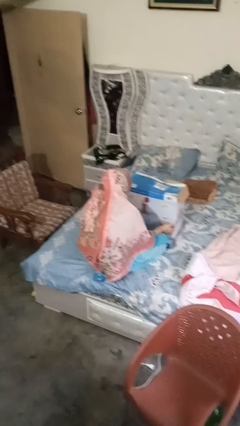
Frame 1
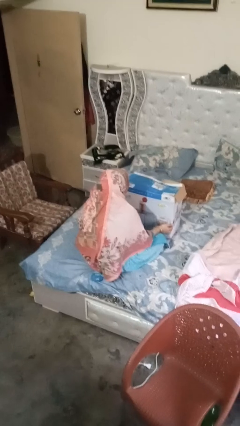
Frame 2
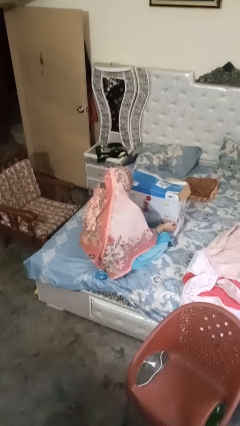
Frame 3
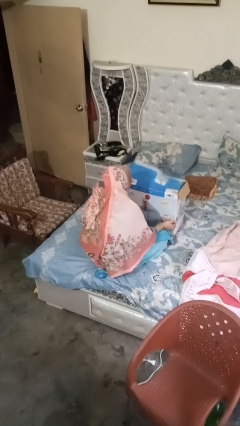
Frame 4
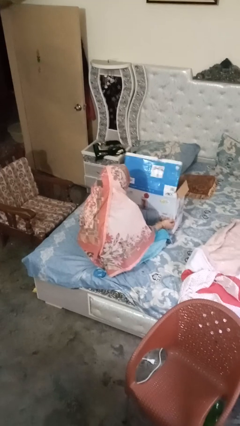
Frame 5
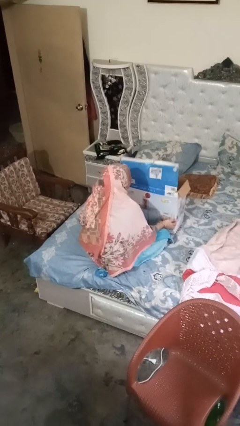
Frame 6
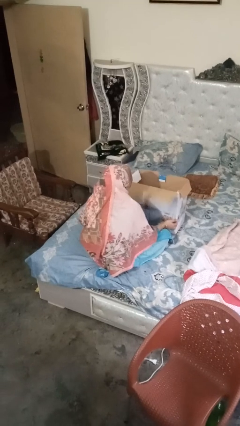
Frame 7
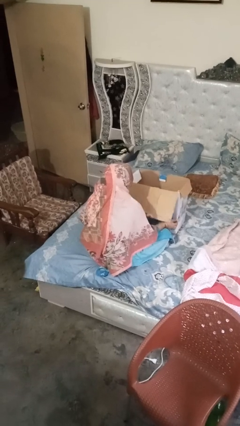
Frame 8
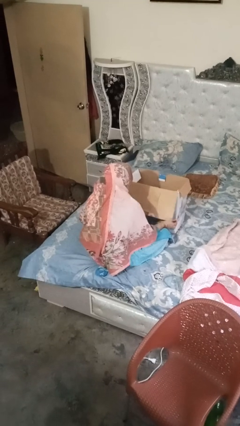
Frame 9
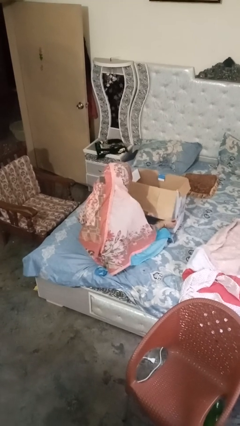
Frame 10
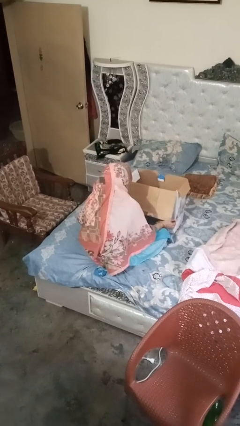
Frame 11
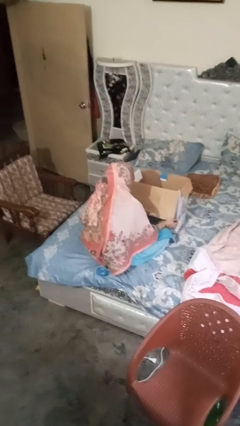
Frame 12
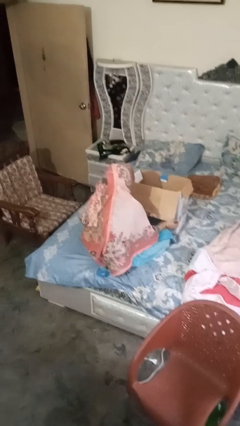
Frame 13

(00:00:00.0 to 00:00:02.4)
person opens box

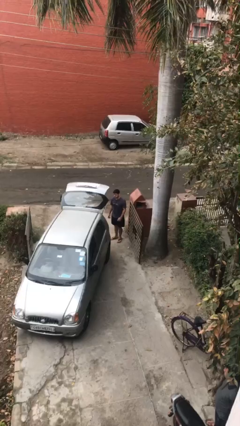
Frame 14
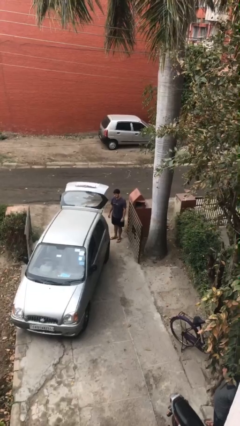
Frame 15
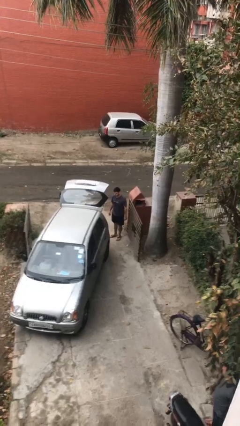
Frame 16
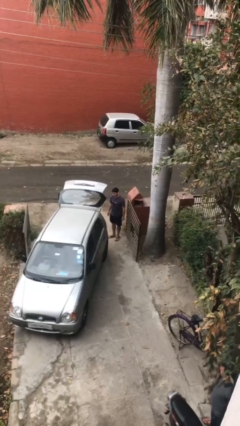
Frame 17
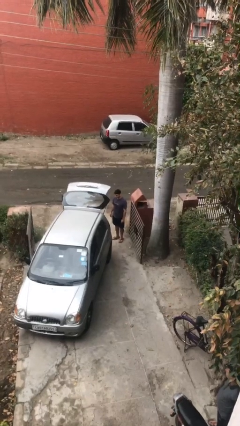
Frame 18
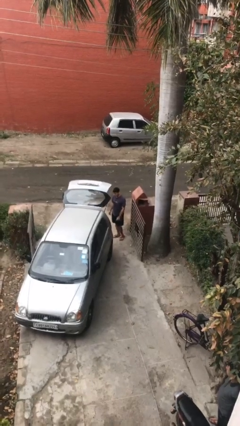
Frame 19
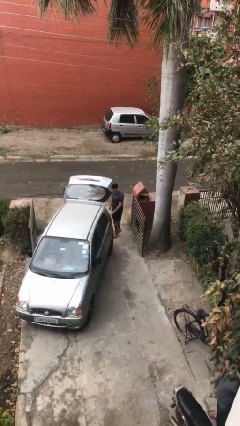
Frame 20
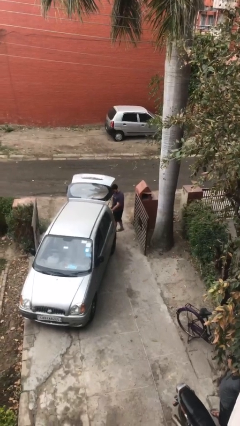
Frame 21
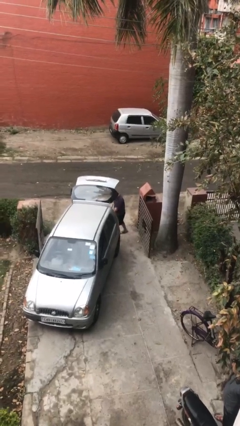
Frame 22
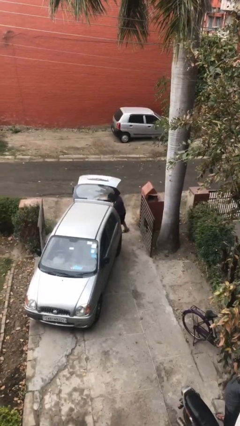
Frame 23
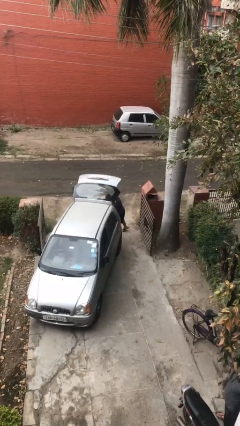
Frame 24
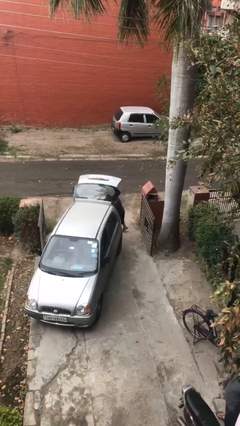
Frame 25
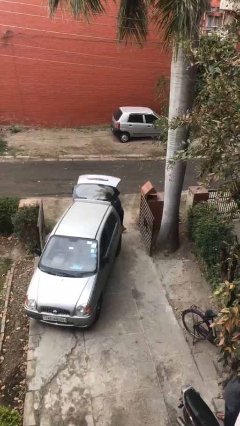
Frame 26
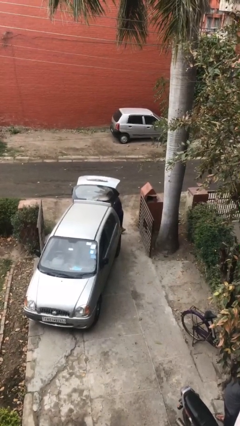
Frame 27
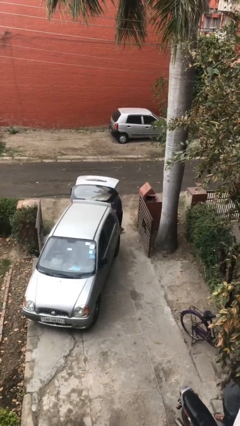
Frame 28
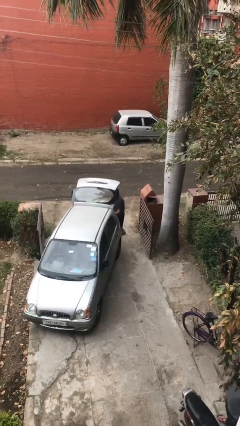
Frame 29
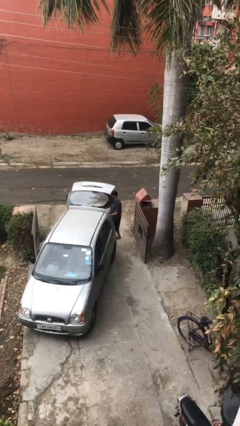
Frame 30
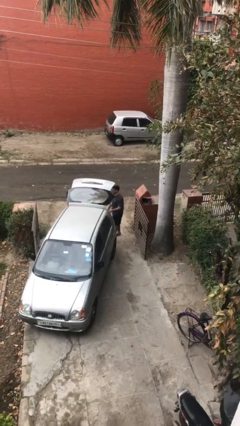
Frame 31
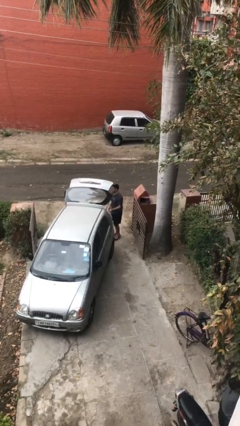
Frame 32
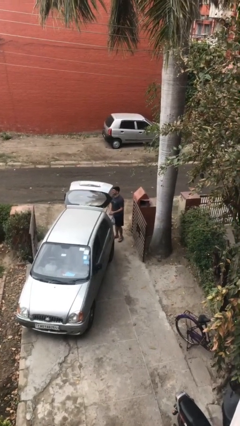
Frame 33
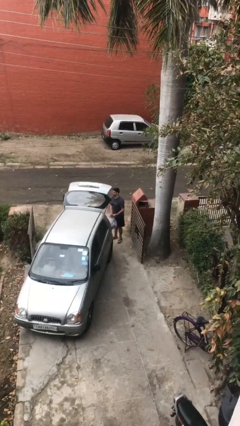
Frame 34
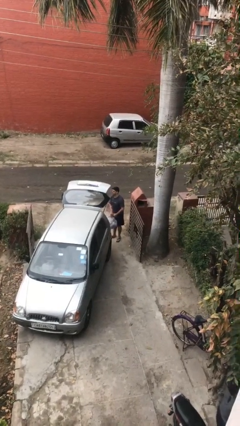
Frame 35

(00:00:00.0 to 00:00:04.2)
person unloads car

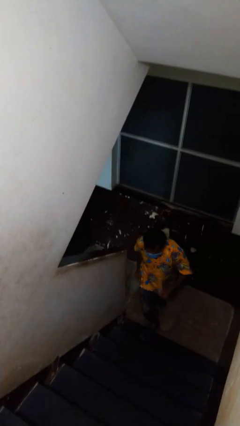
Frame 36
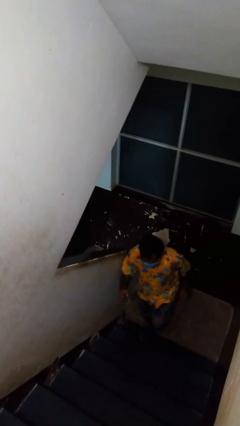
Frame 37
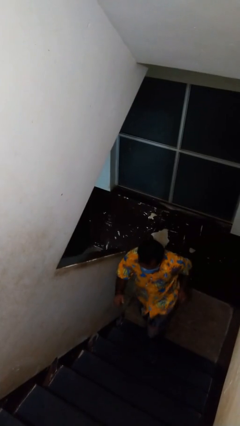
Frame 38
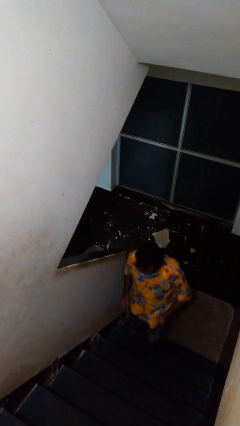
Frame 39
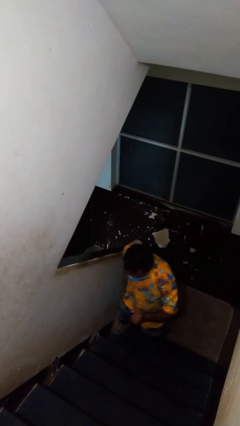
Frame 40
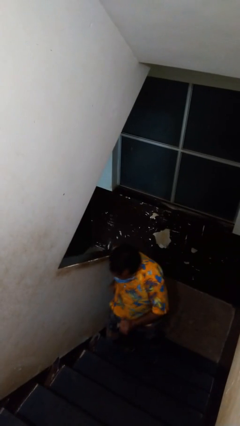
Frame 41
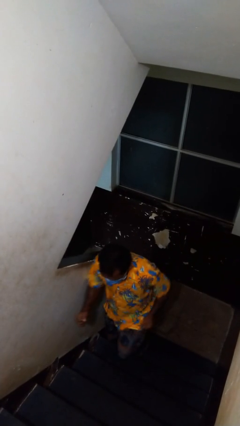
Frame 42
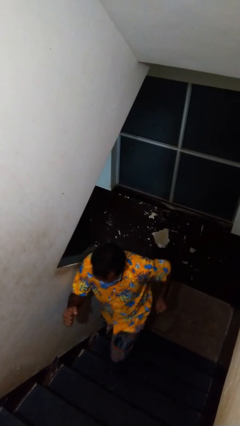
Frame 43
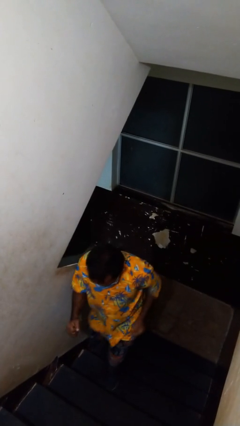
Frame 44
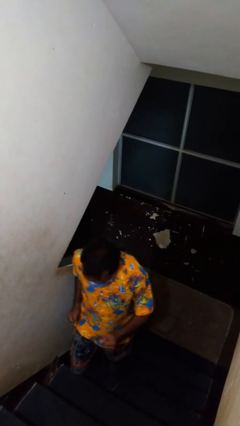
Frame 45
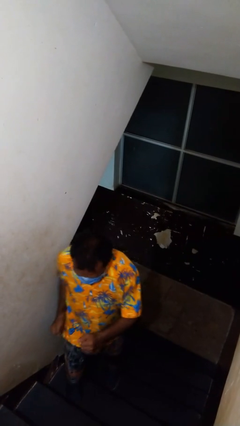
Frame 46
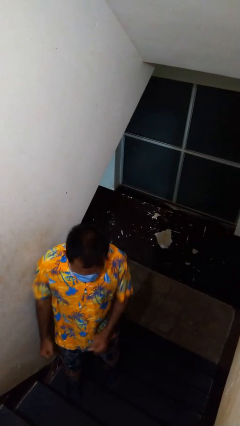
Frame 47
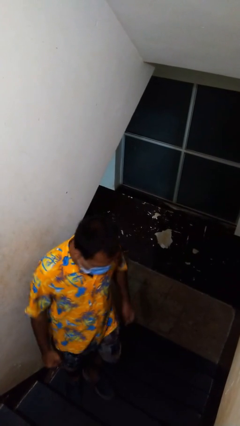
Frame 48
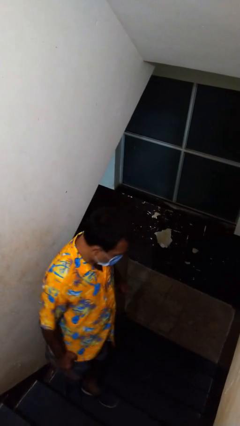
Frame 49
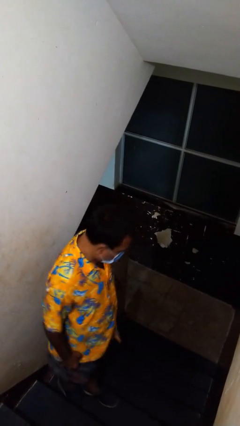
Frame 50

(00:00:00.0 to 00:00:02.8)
person climbs up stairs

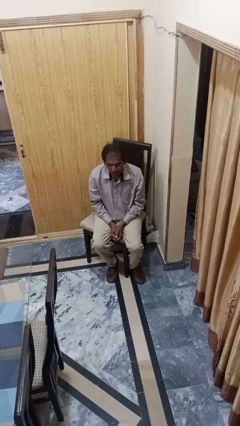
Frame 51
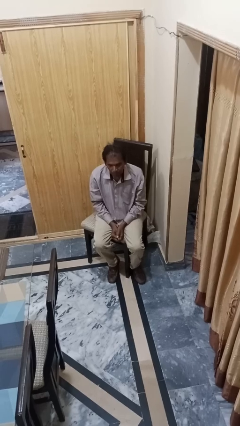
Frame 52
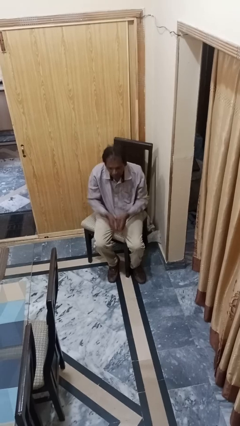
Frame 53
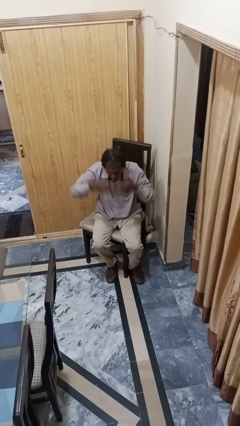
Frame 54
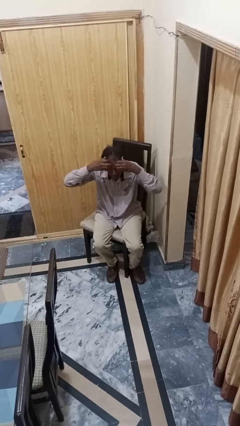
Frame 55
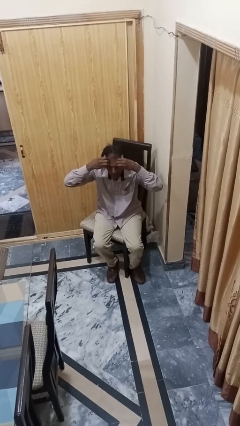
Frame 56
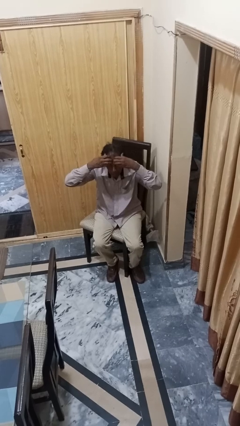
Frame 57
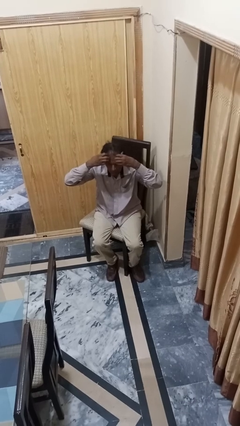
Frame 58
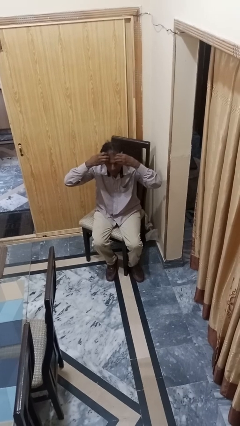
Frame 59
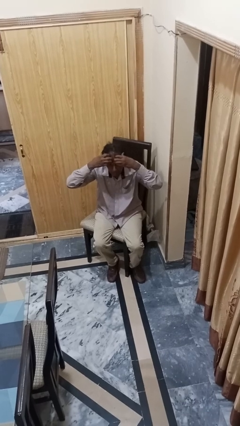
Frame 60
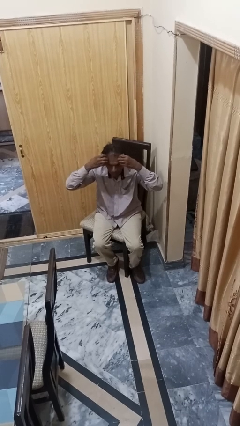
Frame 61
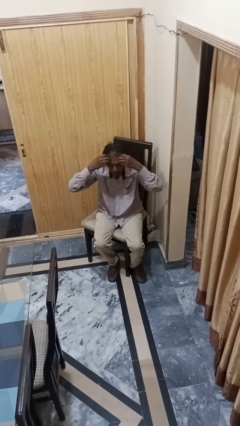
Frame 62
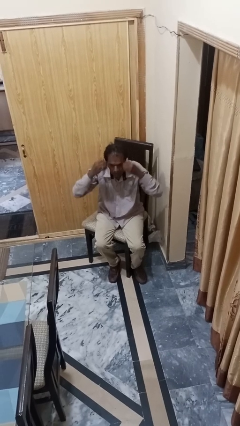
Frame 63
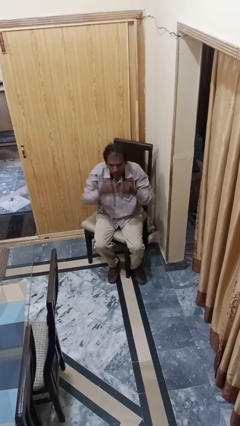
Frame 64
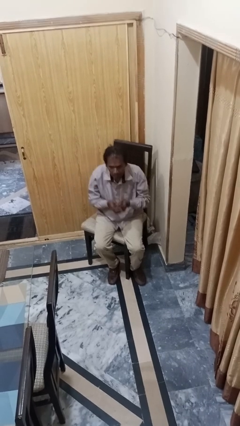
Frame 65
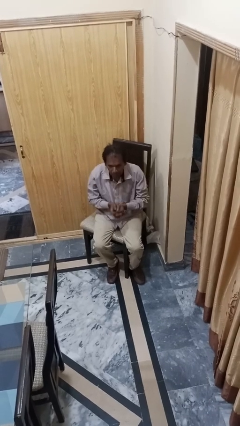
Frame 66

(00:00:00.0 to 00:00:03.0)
person scratches face

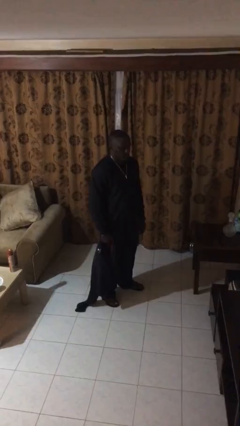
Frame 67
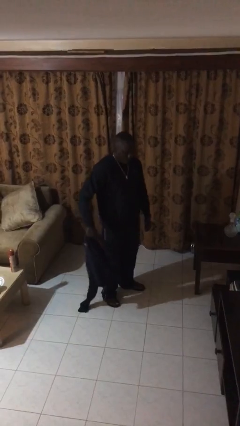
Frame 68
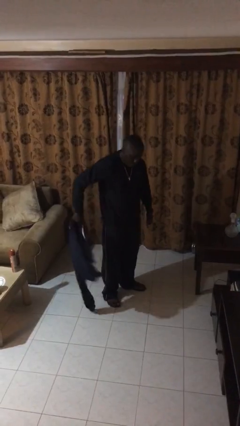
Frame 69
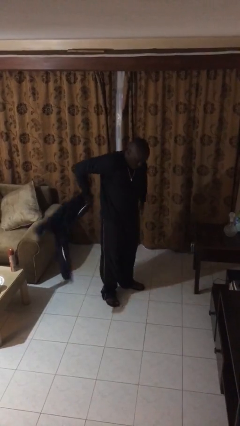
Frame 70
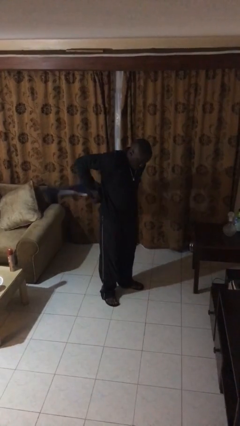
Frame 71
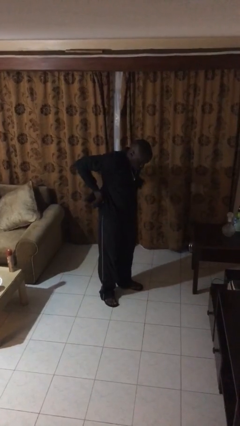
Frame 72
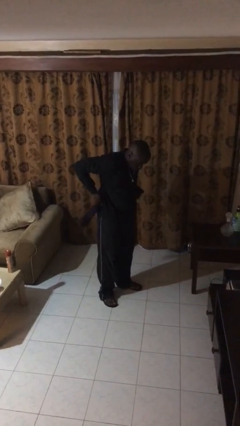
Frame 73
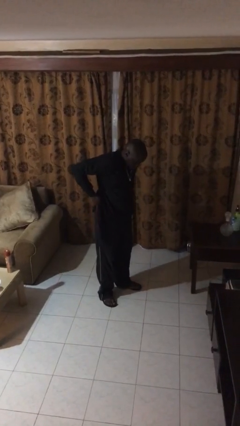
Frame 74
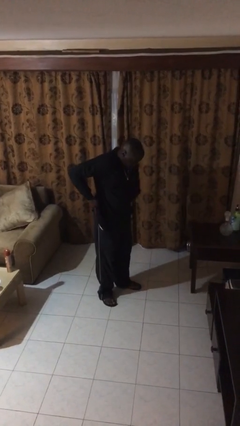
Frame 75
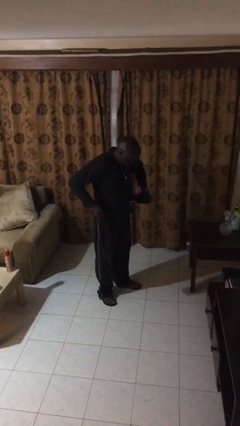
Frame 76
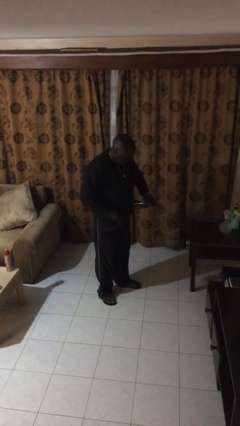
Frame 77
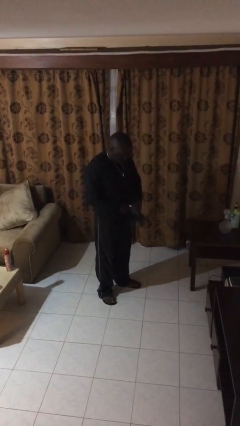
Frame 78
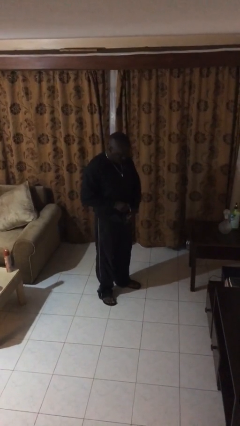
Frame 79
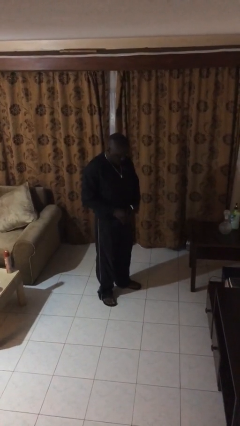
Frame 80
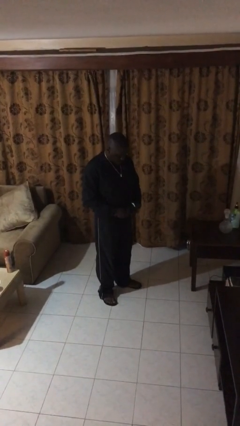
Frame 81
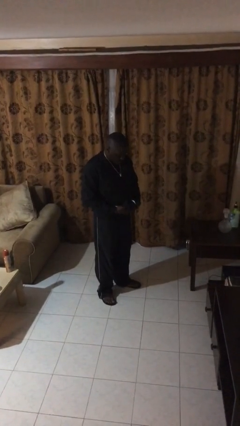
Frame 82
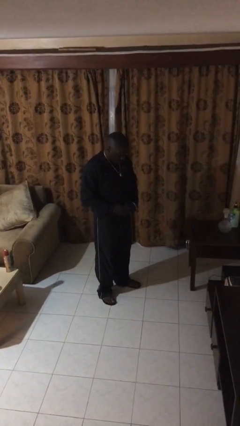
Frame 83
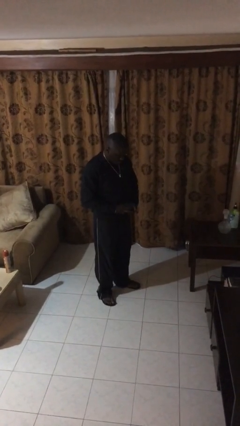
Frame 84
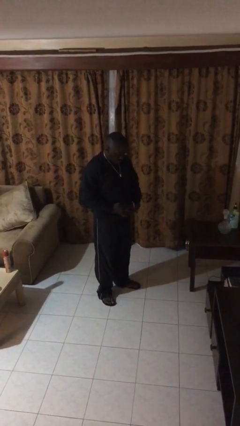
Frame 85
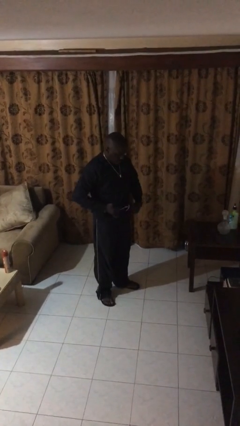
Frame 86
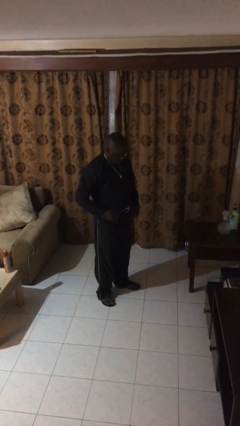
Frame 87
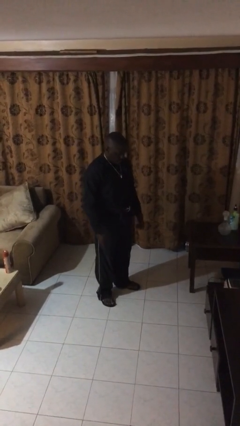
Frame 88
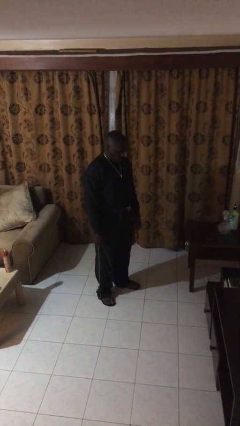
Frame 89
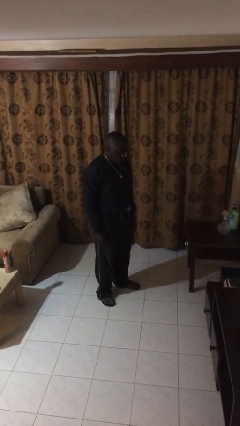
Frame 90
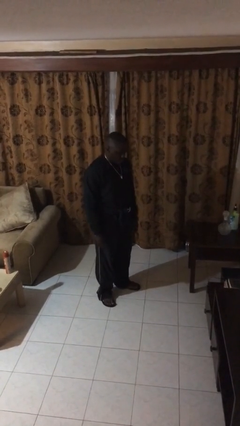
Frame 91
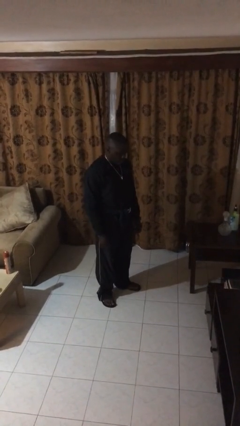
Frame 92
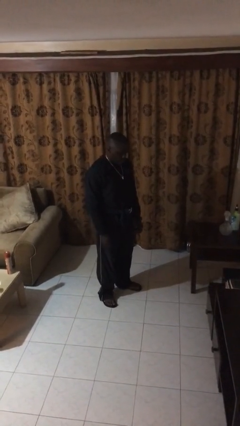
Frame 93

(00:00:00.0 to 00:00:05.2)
person ties jacket around waist
